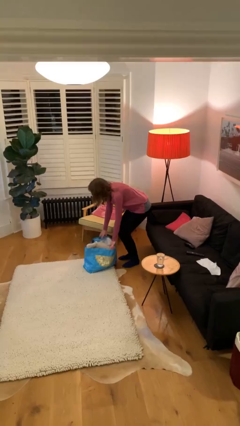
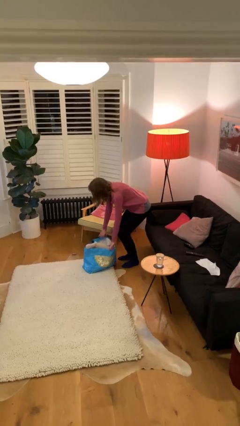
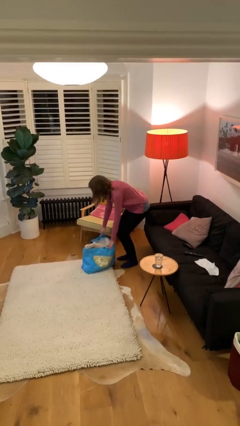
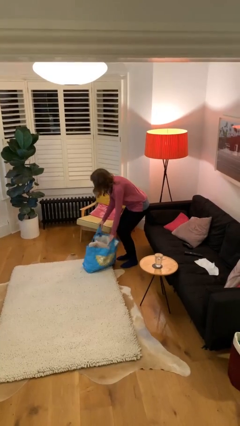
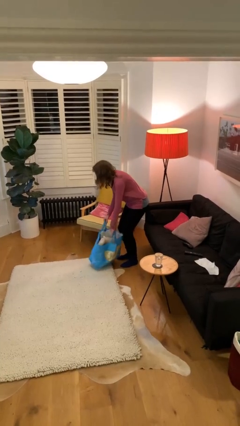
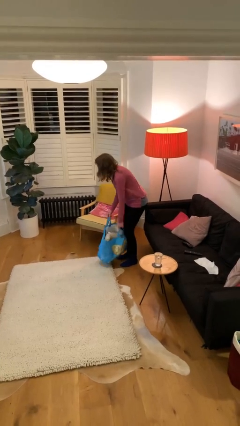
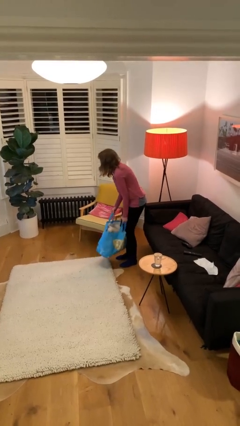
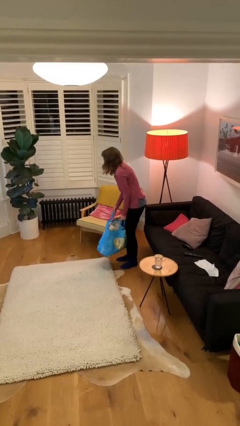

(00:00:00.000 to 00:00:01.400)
person picks up object from floor

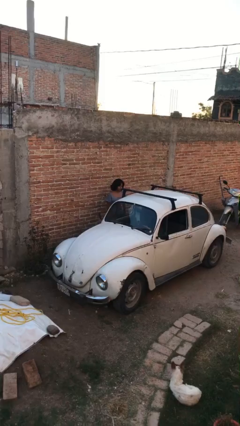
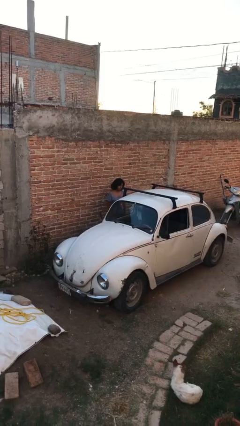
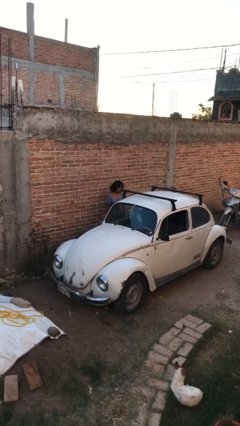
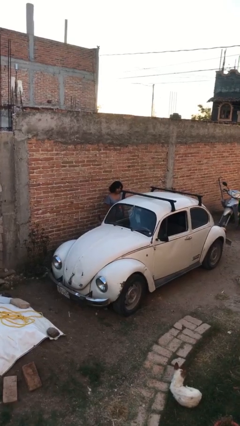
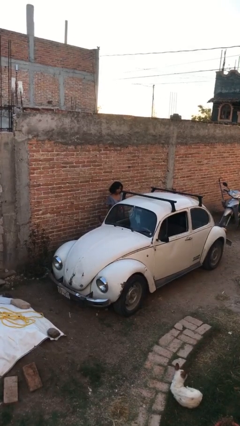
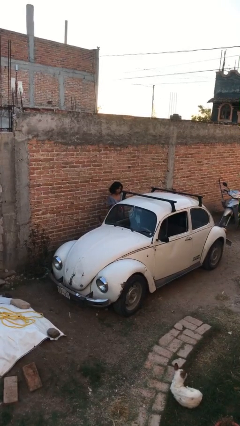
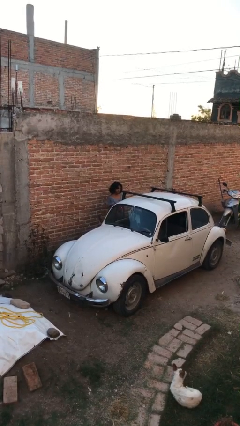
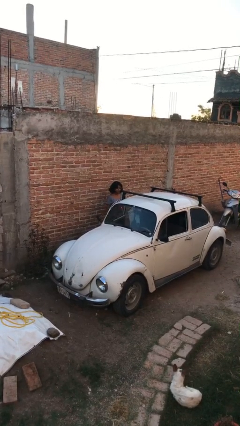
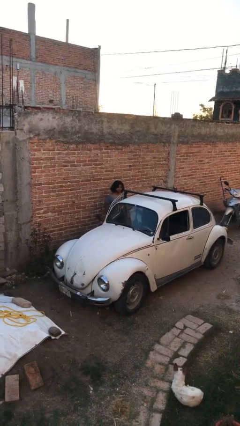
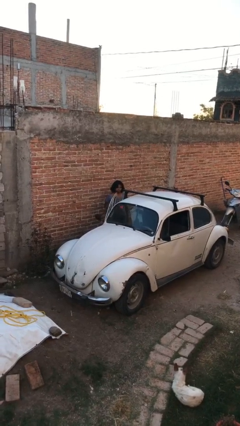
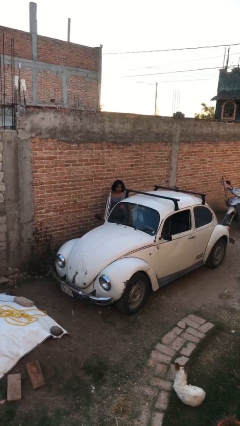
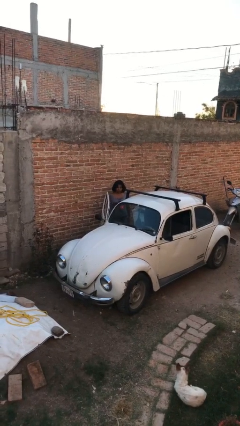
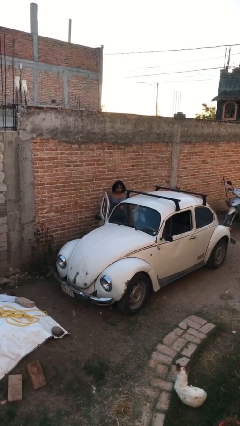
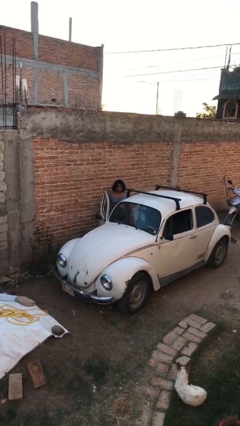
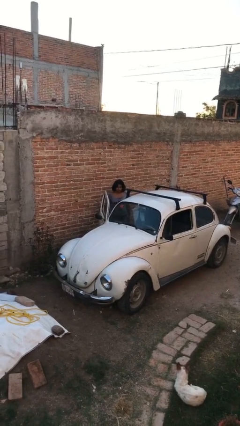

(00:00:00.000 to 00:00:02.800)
person opens car door

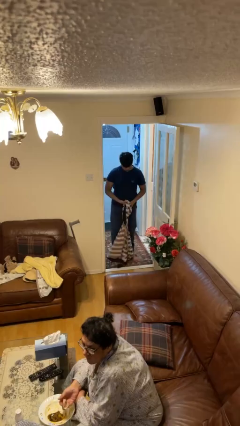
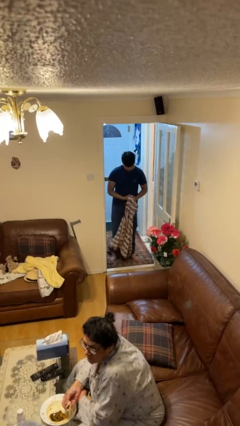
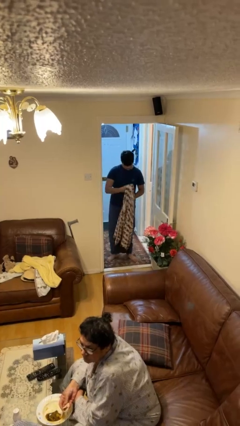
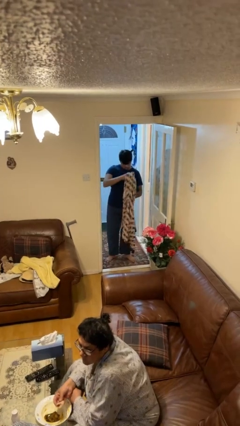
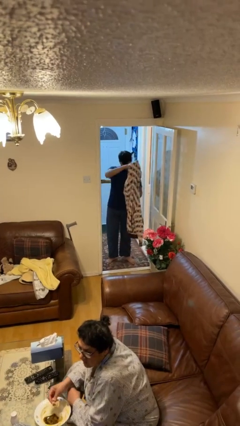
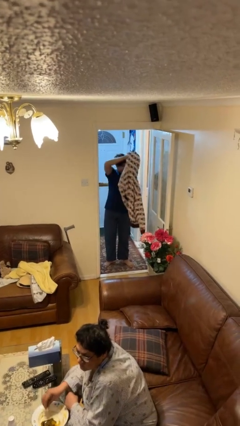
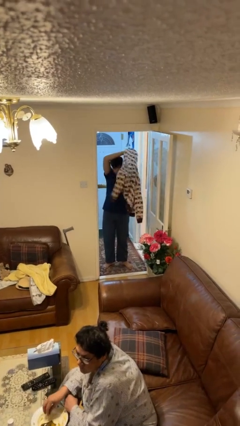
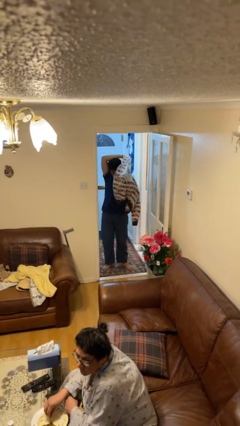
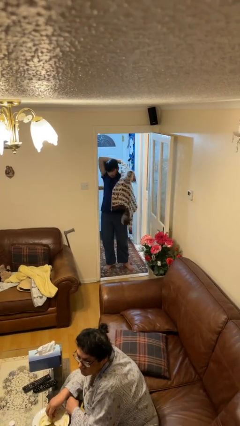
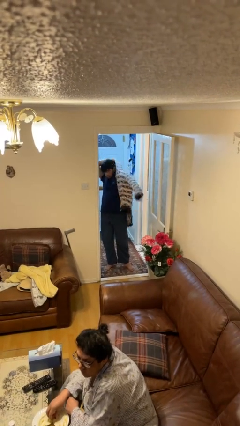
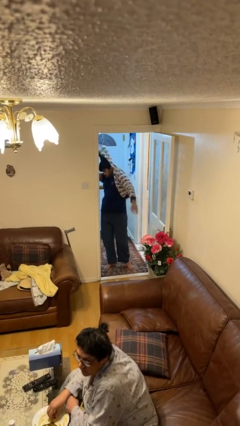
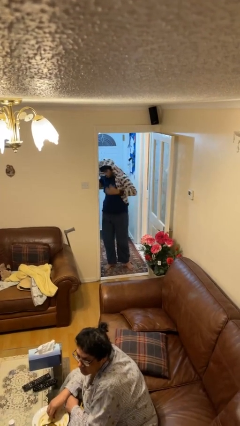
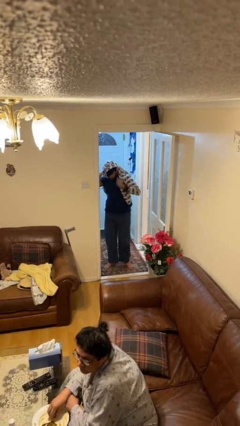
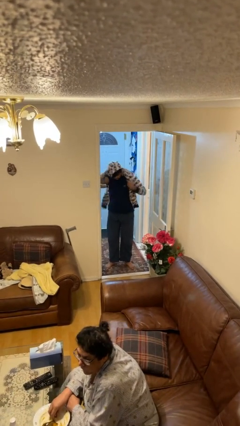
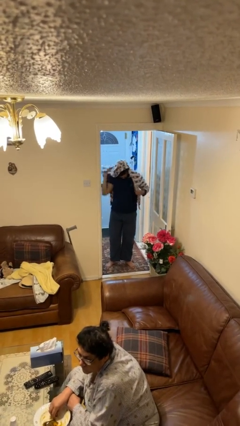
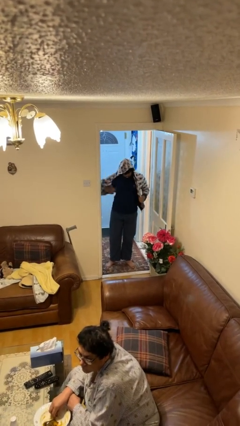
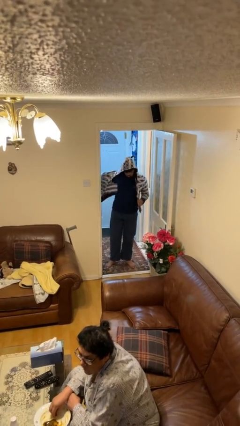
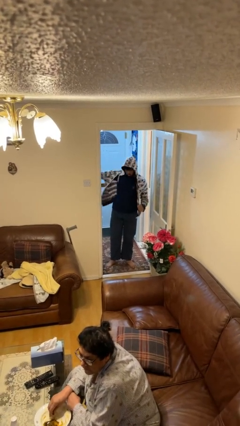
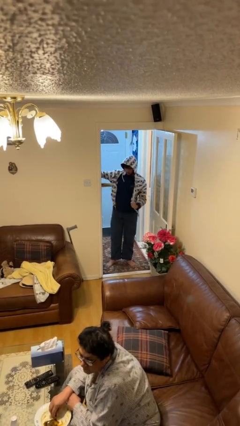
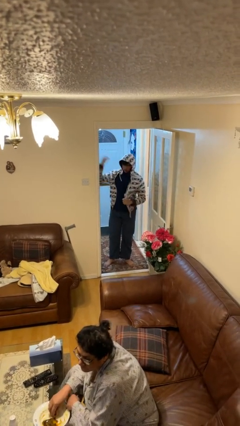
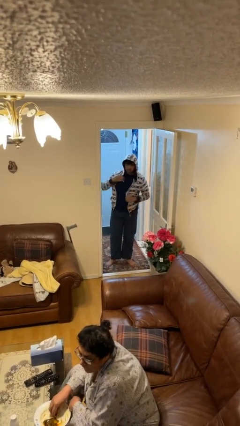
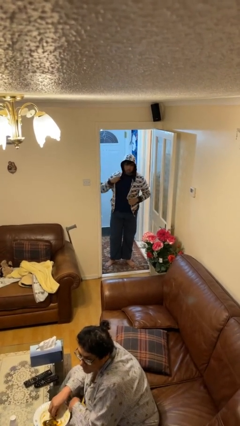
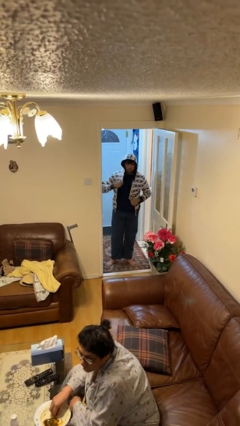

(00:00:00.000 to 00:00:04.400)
person puts on hoodie

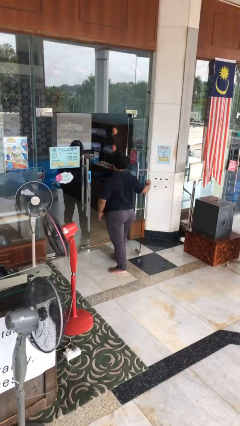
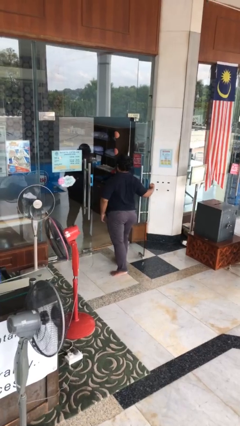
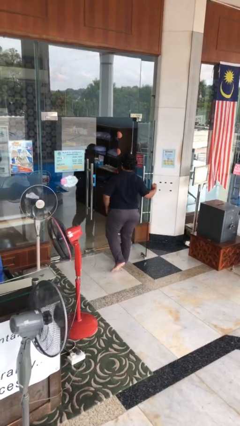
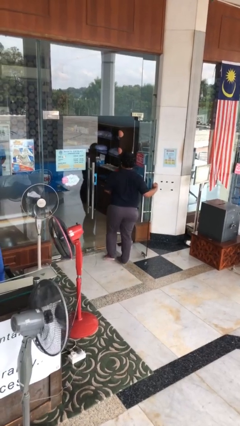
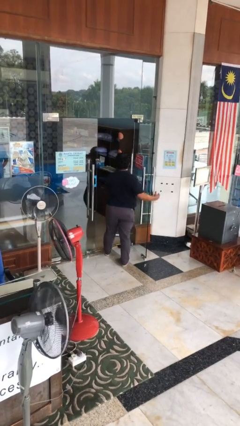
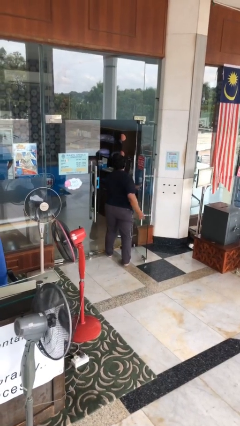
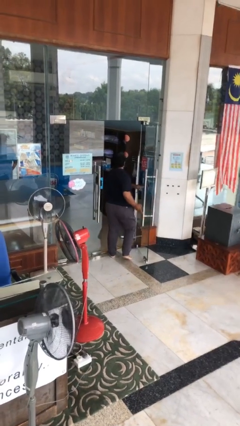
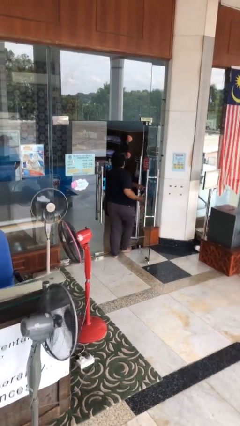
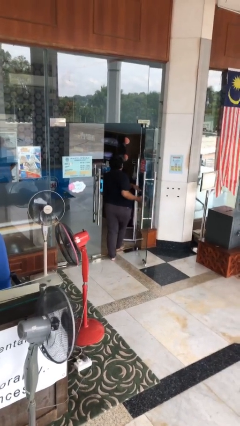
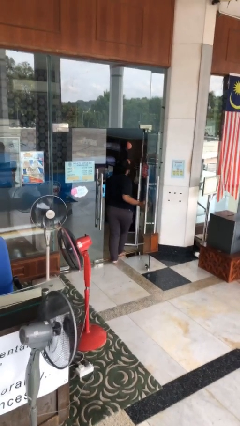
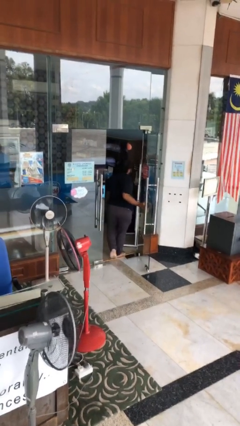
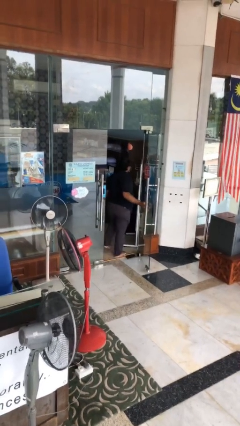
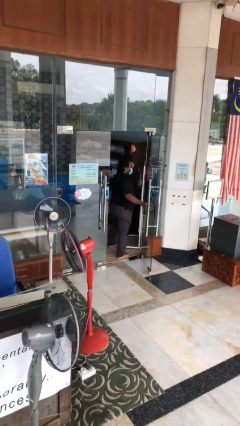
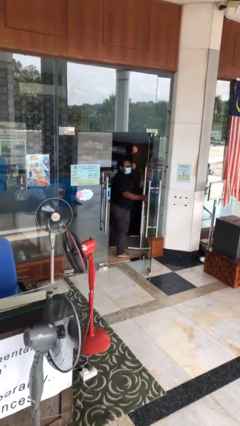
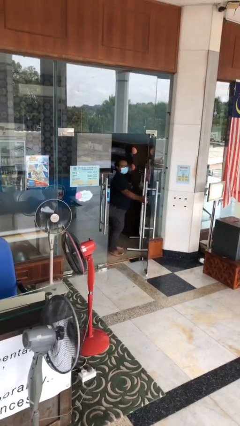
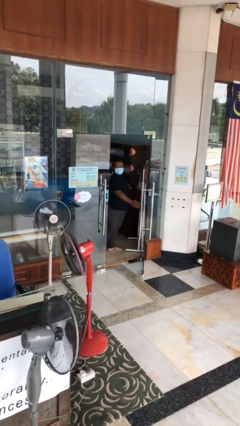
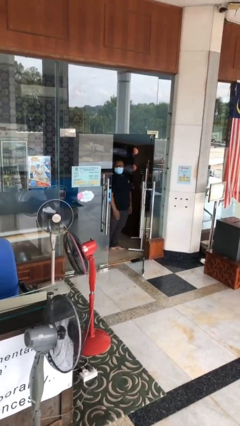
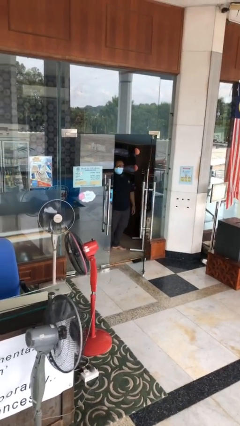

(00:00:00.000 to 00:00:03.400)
person exits scene through structure

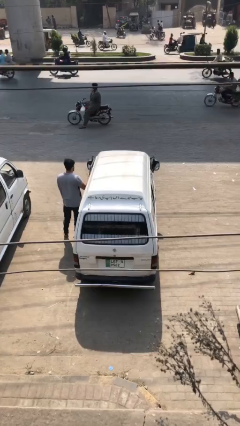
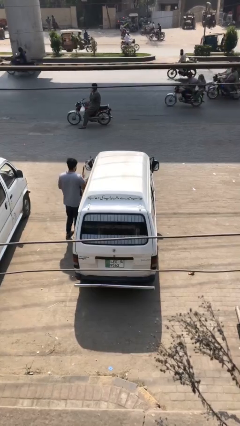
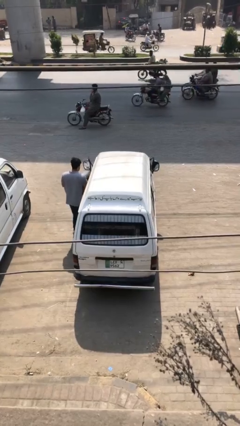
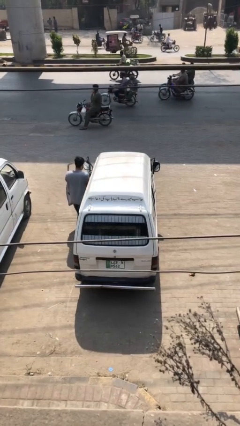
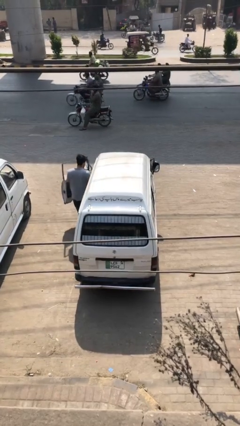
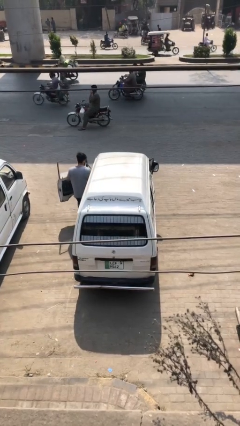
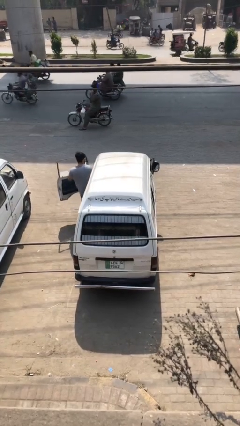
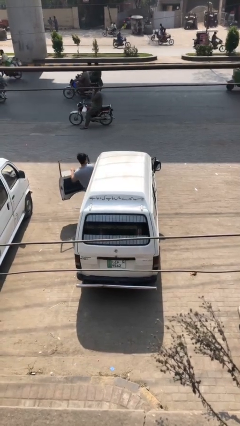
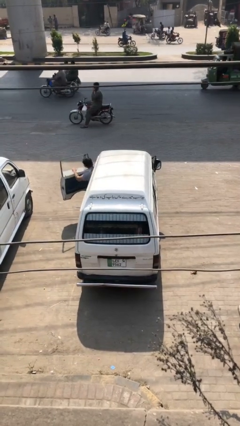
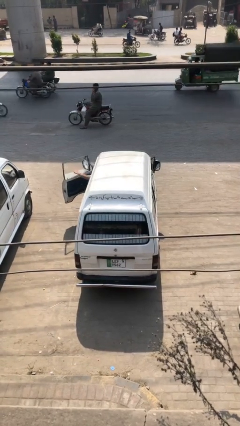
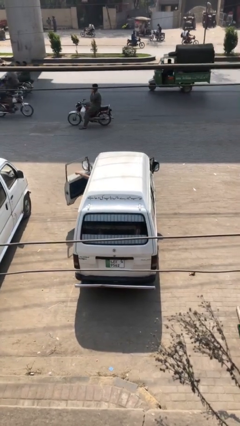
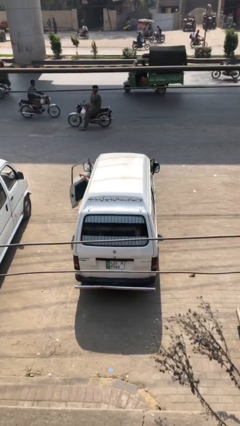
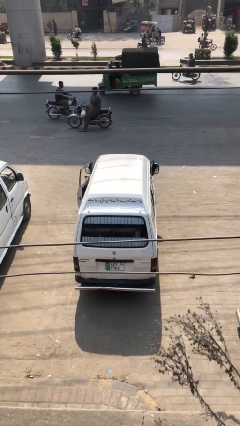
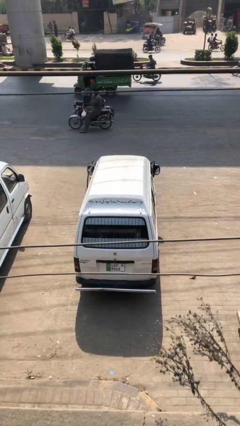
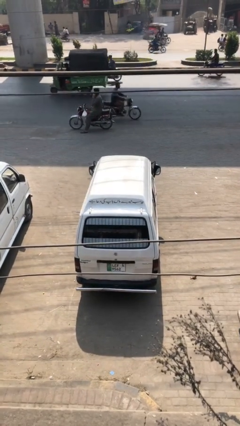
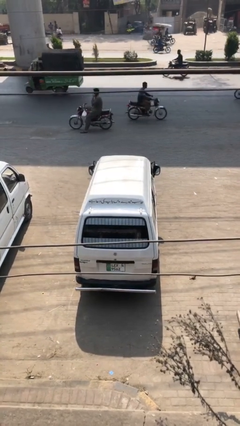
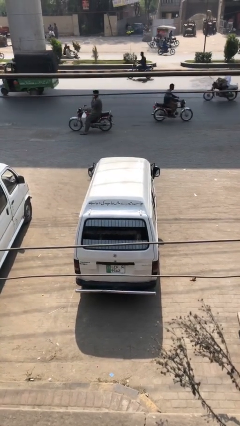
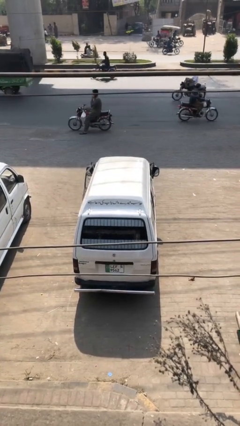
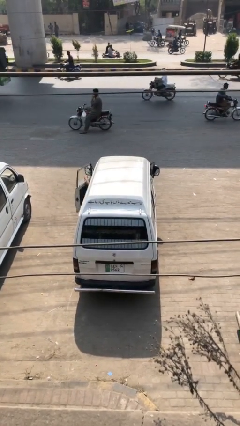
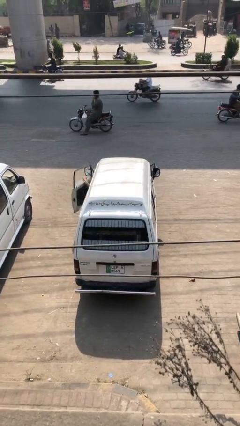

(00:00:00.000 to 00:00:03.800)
car picks up person

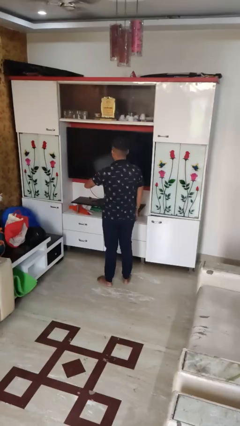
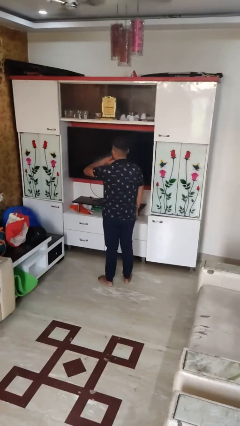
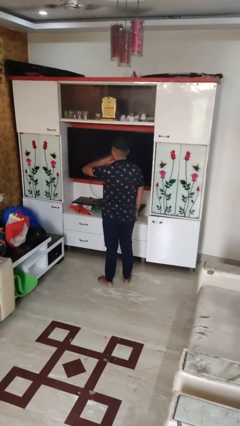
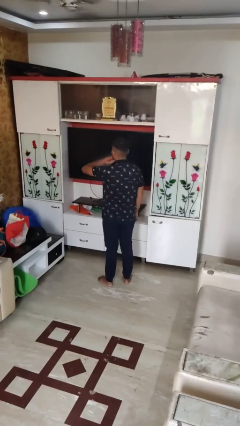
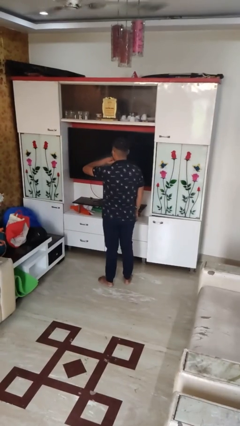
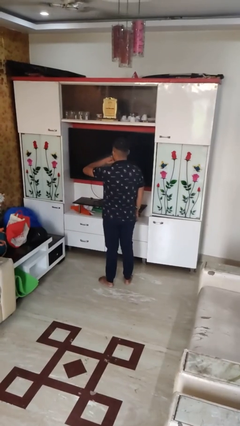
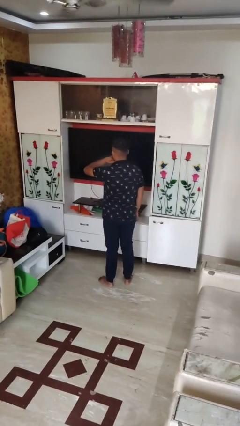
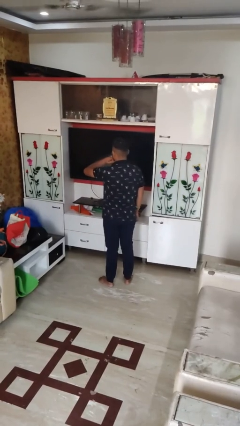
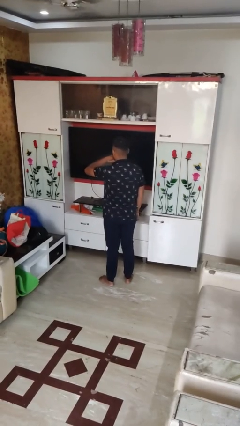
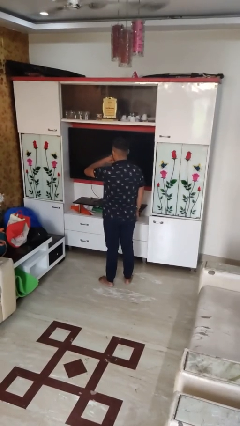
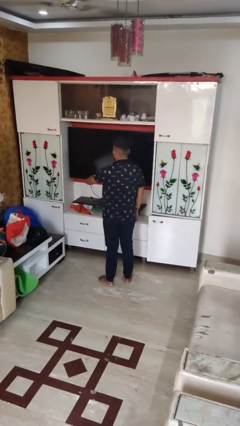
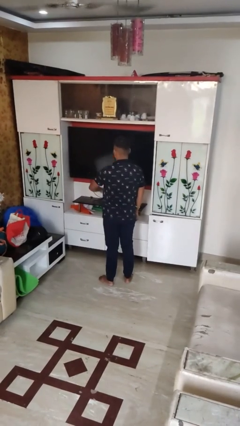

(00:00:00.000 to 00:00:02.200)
person strokes chin
